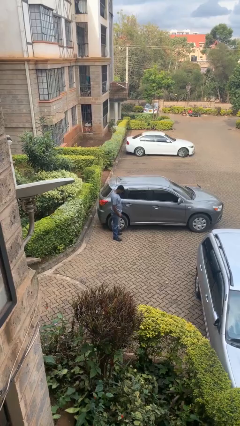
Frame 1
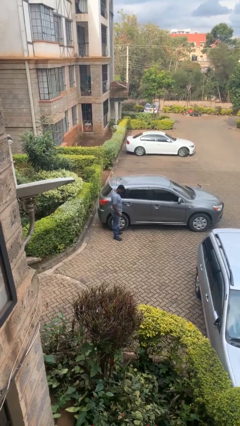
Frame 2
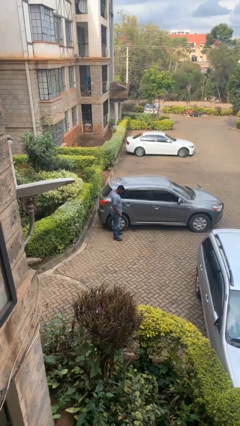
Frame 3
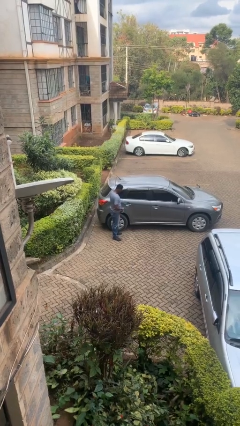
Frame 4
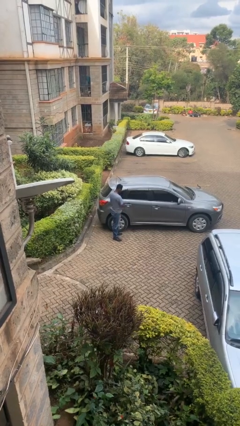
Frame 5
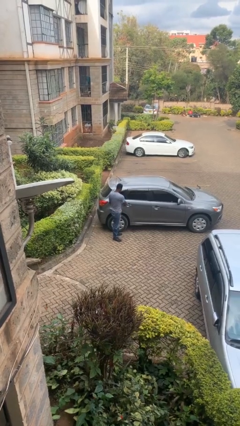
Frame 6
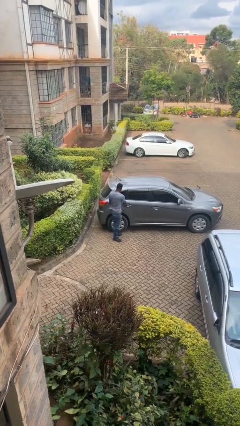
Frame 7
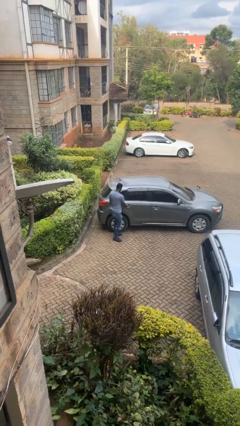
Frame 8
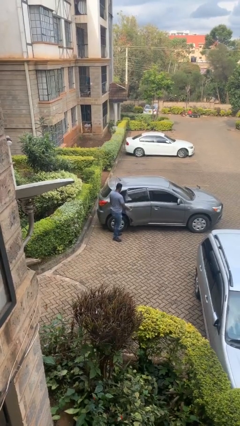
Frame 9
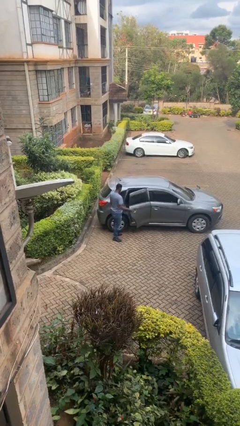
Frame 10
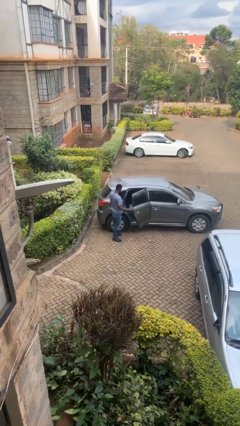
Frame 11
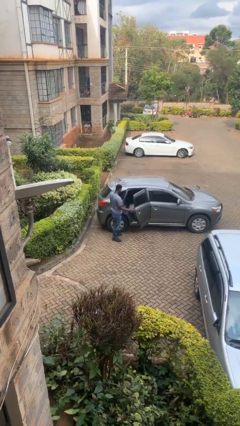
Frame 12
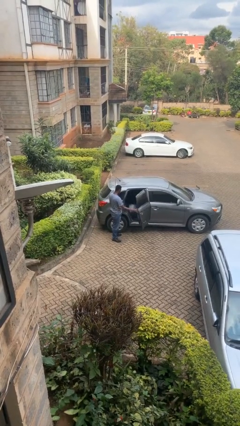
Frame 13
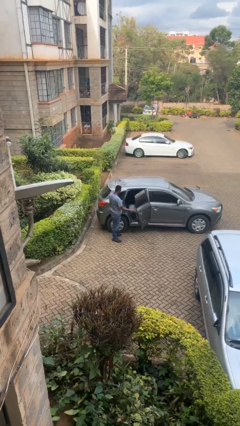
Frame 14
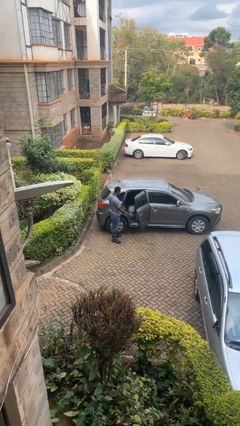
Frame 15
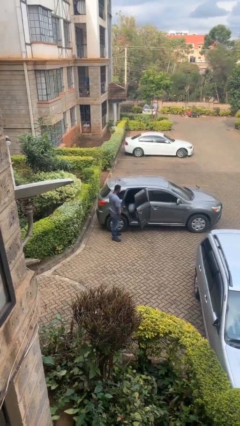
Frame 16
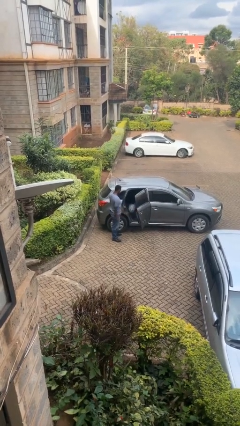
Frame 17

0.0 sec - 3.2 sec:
person opens car door

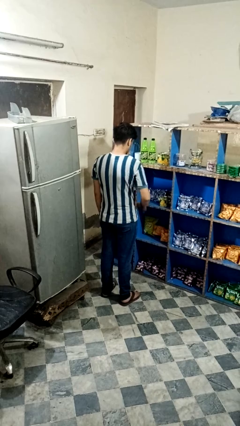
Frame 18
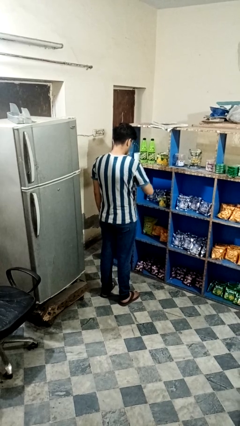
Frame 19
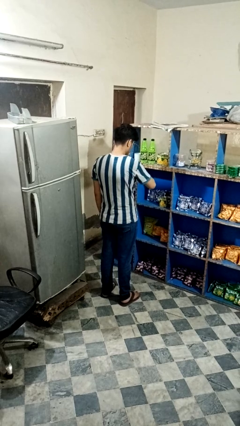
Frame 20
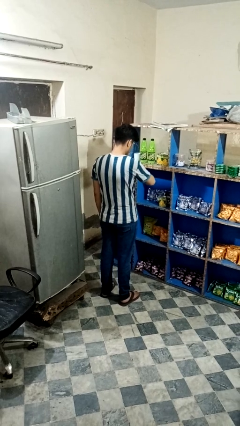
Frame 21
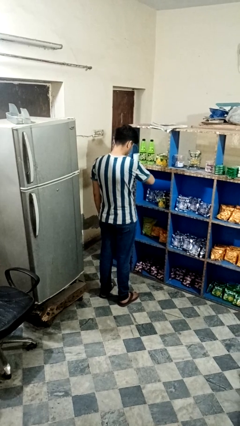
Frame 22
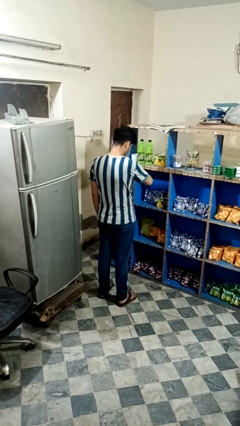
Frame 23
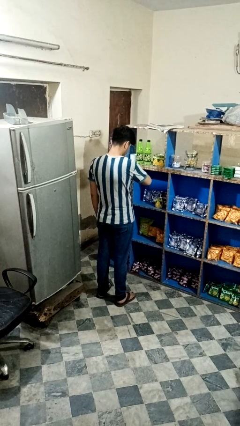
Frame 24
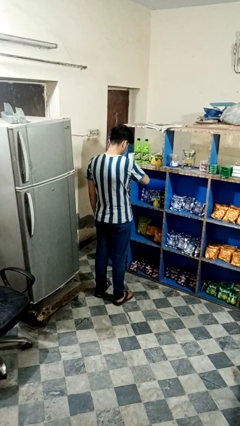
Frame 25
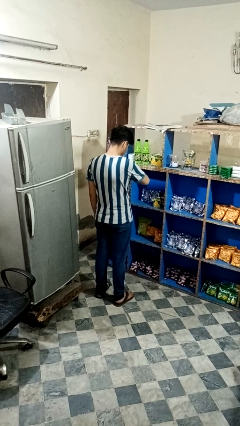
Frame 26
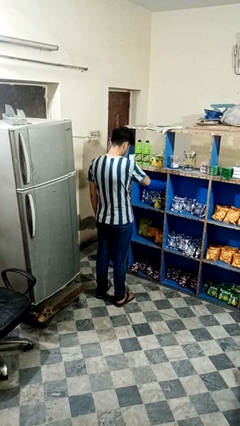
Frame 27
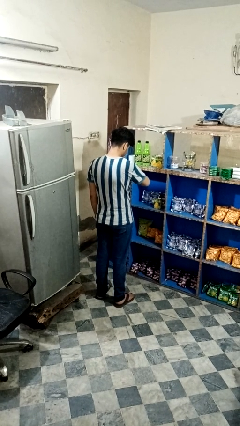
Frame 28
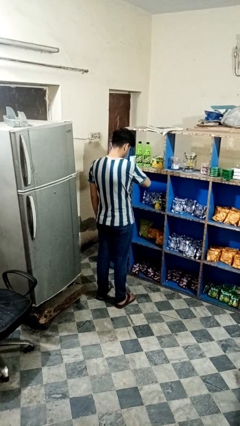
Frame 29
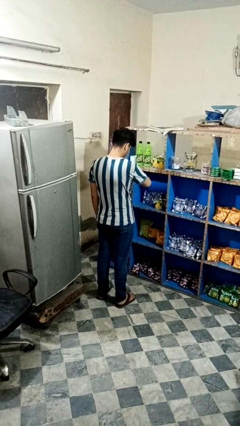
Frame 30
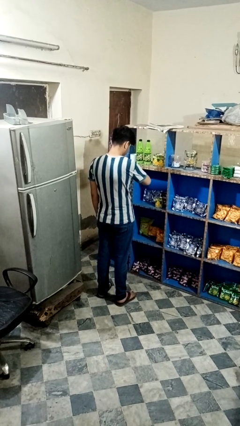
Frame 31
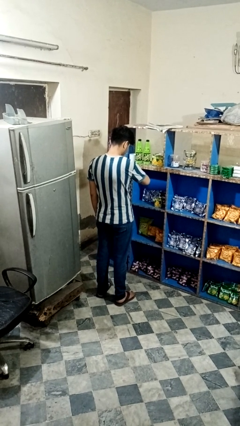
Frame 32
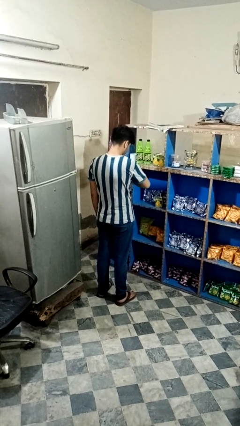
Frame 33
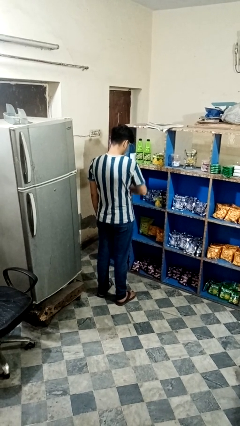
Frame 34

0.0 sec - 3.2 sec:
person looks at wristwatch

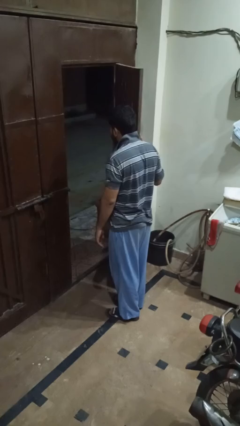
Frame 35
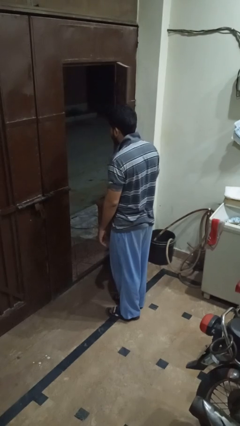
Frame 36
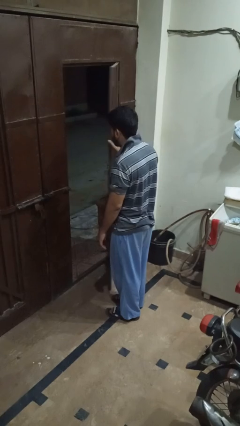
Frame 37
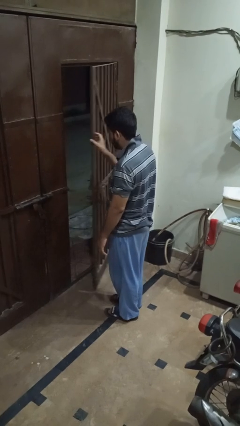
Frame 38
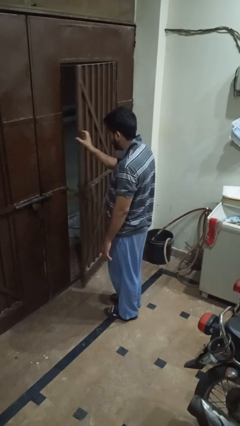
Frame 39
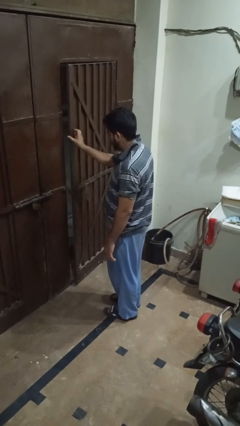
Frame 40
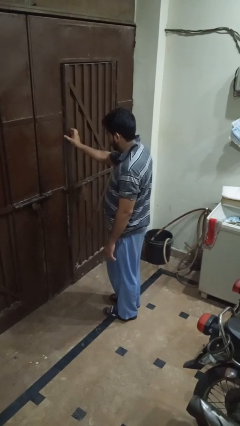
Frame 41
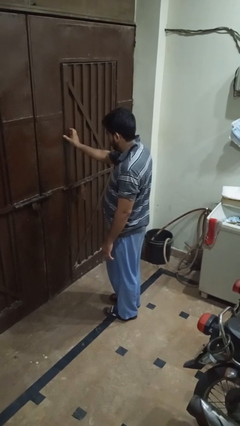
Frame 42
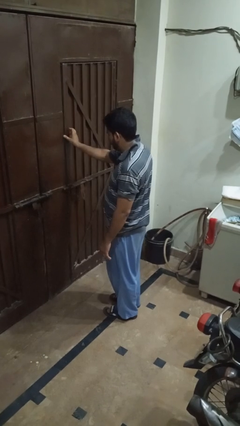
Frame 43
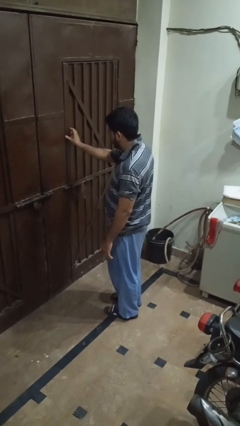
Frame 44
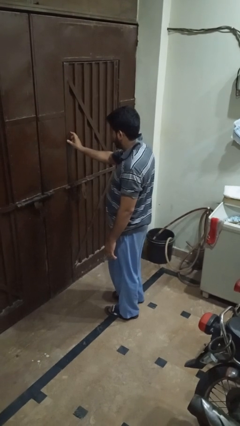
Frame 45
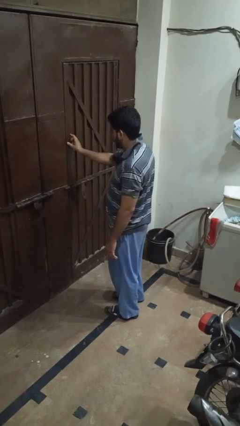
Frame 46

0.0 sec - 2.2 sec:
person closes gate

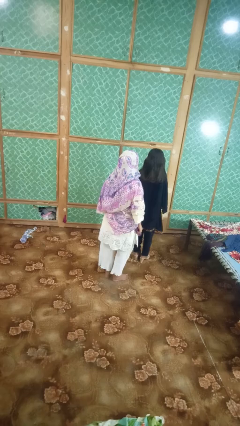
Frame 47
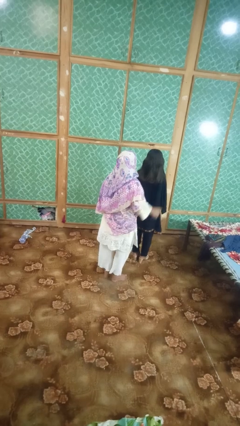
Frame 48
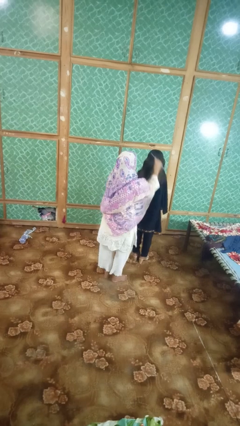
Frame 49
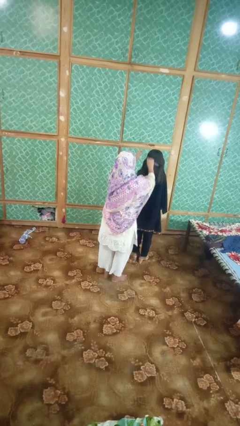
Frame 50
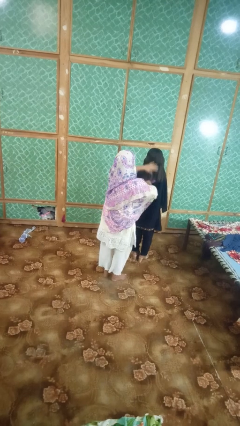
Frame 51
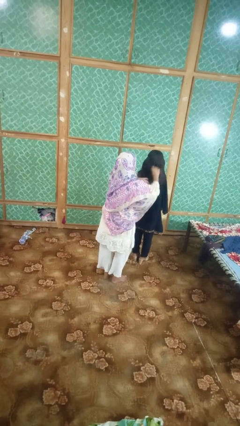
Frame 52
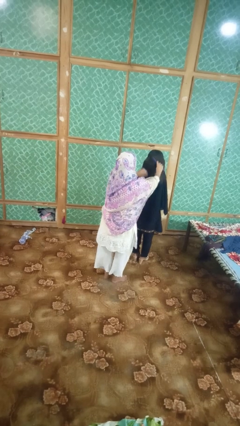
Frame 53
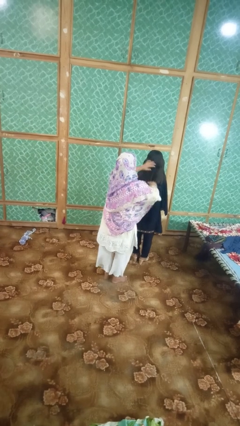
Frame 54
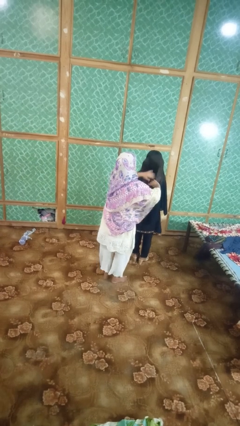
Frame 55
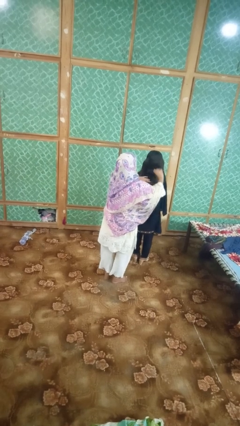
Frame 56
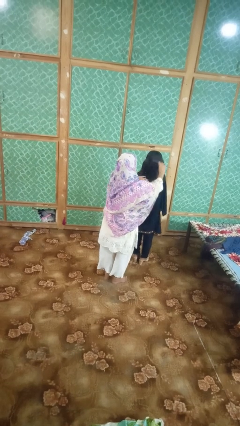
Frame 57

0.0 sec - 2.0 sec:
person brushes hair of person

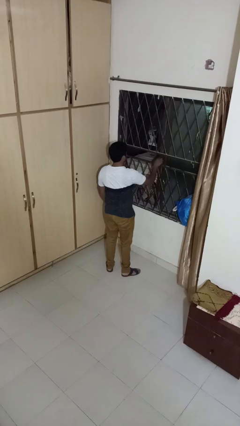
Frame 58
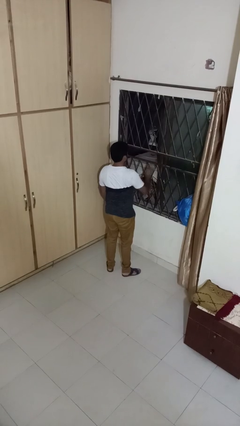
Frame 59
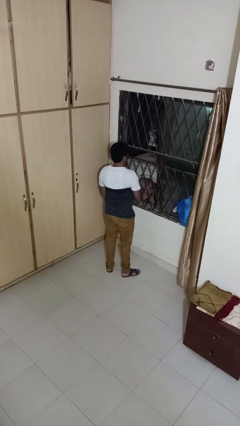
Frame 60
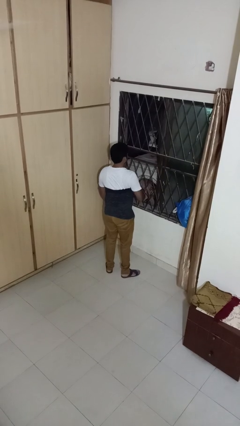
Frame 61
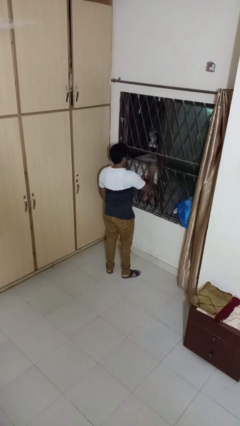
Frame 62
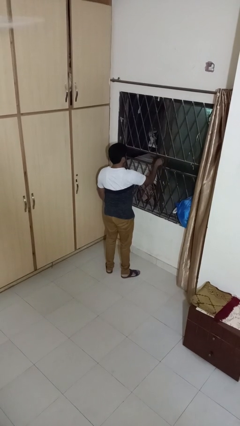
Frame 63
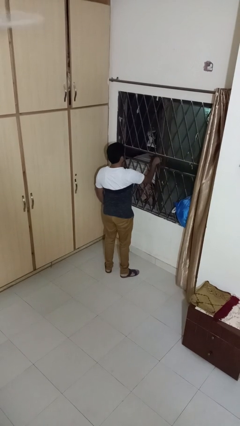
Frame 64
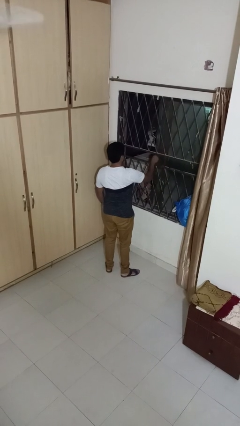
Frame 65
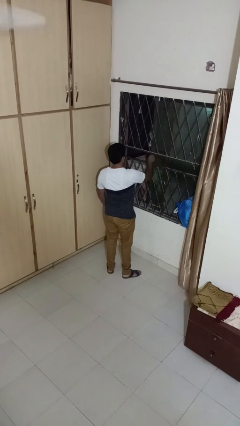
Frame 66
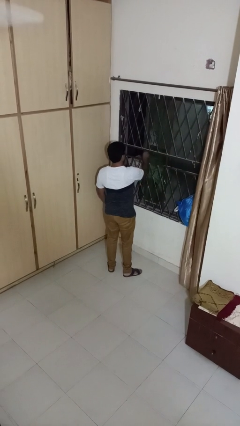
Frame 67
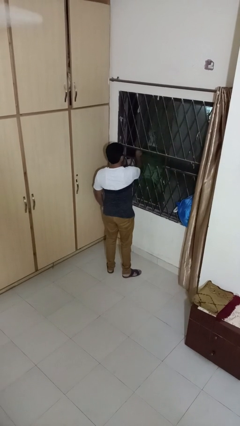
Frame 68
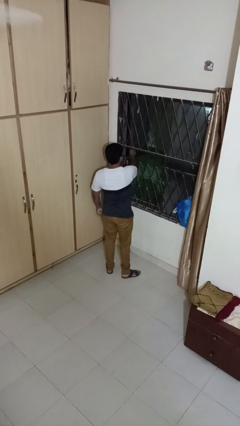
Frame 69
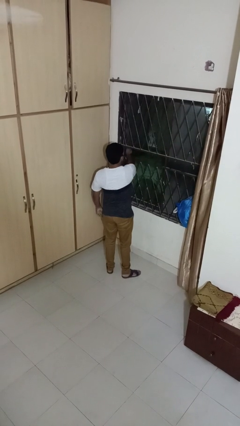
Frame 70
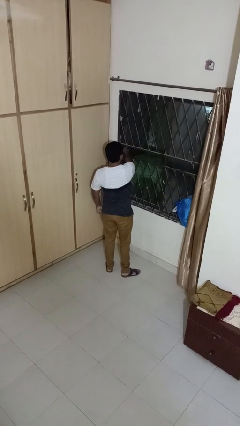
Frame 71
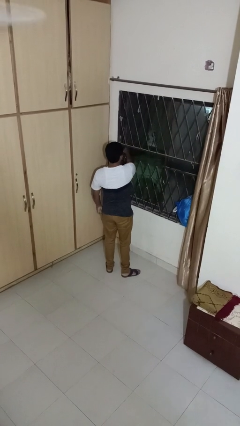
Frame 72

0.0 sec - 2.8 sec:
person closes home window

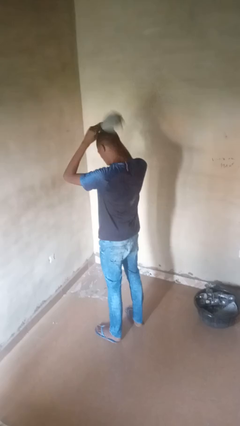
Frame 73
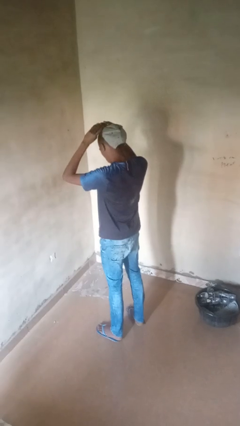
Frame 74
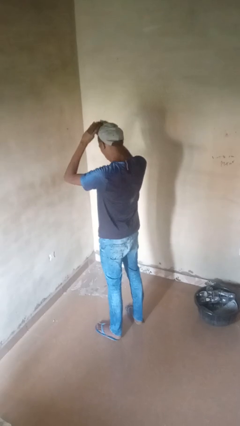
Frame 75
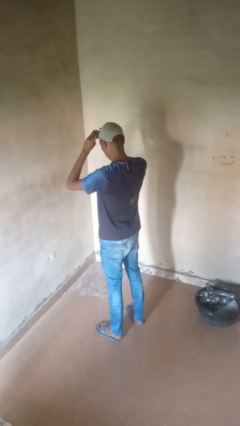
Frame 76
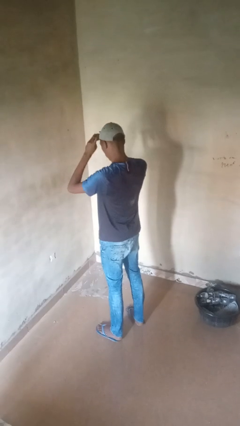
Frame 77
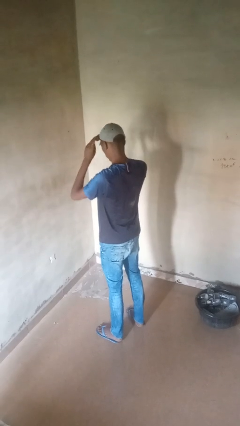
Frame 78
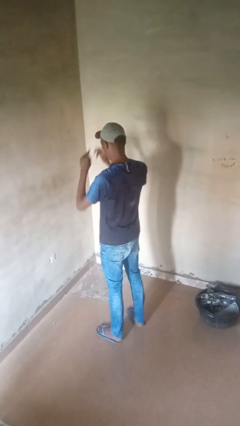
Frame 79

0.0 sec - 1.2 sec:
person puts on hat

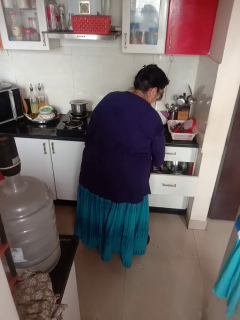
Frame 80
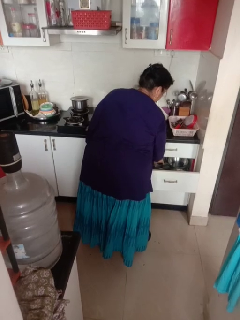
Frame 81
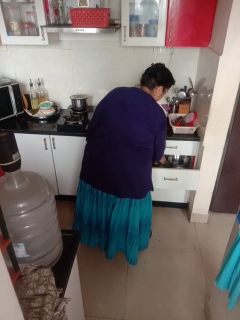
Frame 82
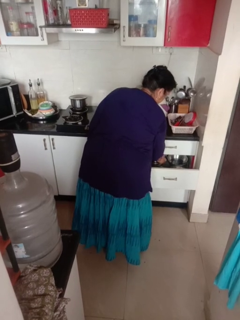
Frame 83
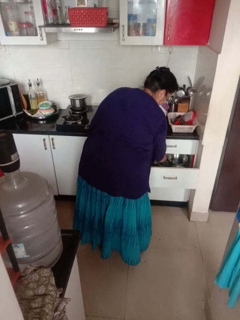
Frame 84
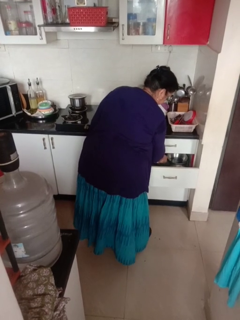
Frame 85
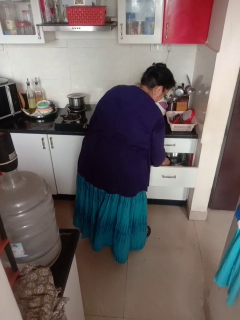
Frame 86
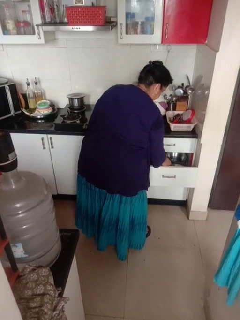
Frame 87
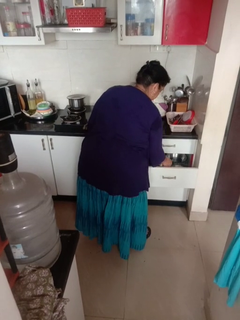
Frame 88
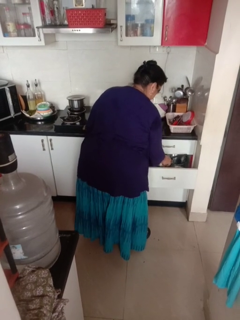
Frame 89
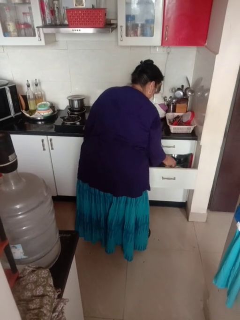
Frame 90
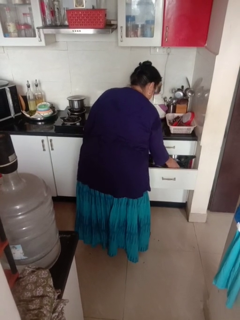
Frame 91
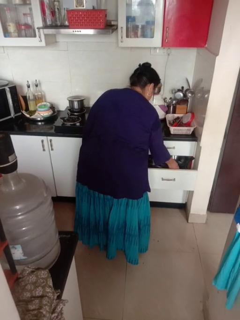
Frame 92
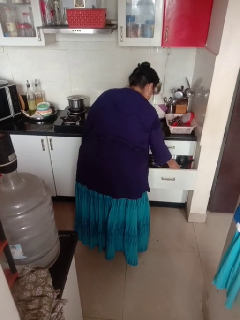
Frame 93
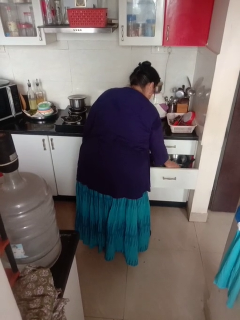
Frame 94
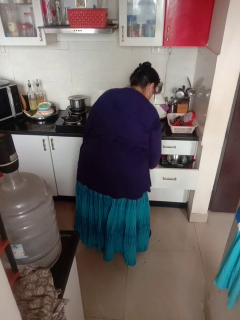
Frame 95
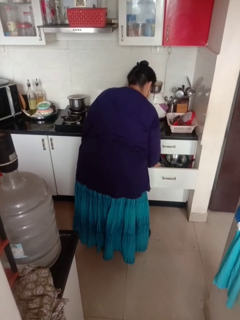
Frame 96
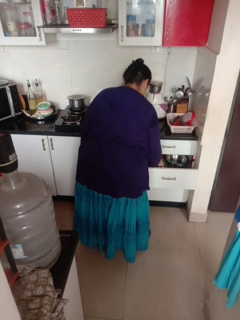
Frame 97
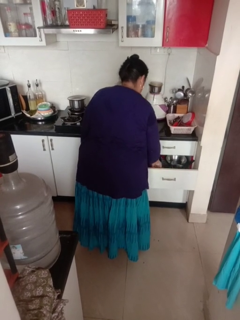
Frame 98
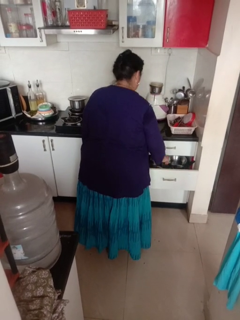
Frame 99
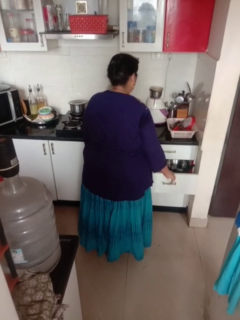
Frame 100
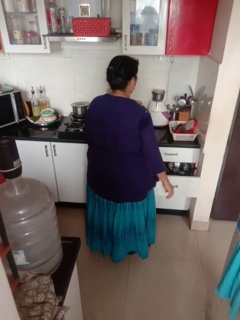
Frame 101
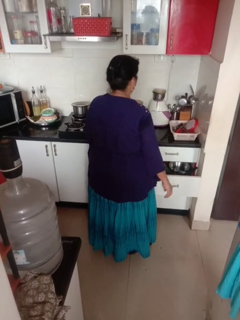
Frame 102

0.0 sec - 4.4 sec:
person searches in kitchen drawer
